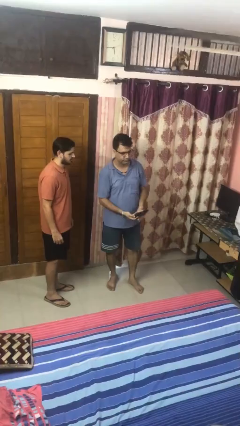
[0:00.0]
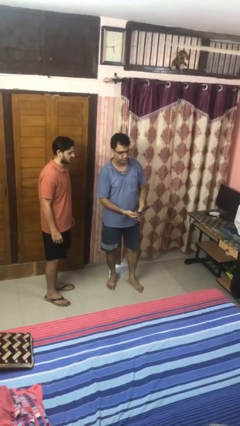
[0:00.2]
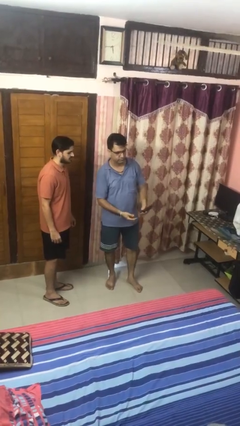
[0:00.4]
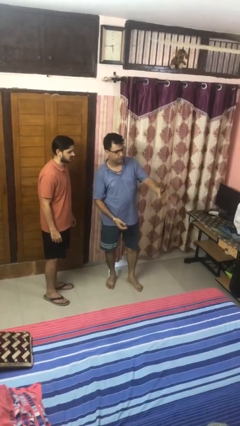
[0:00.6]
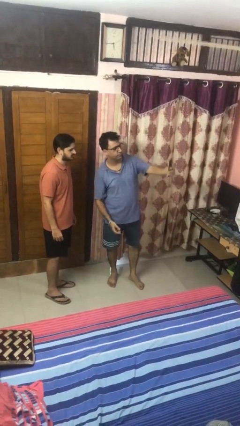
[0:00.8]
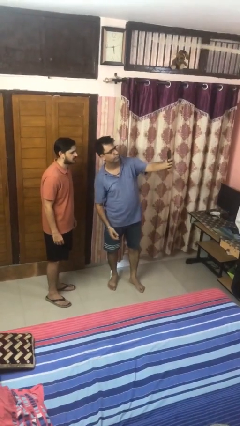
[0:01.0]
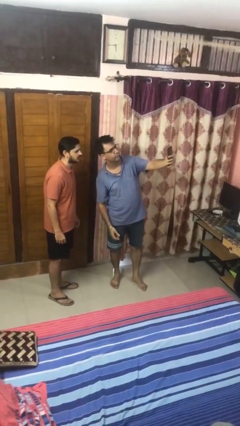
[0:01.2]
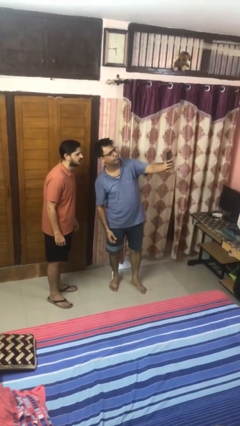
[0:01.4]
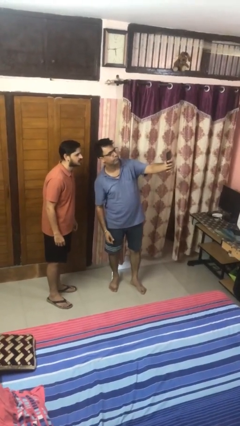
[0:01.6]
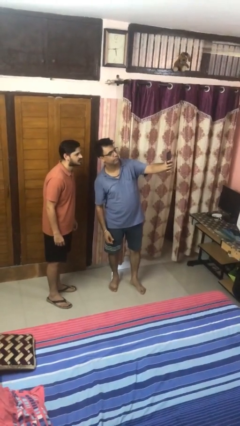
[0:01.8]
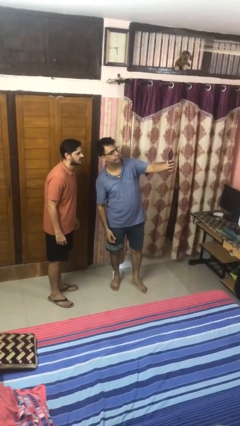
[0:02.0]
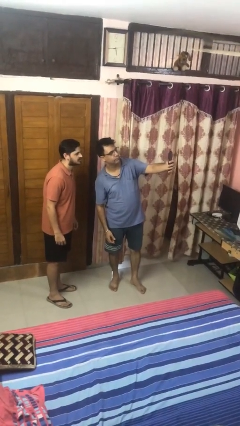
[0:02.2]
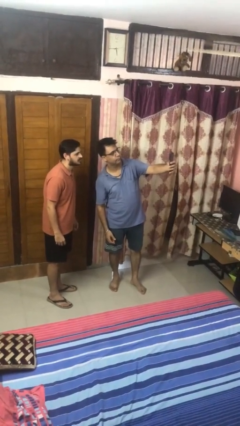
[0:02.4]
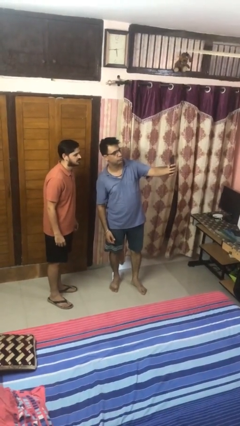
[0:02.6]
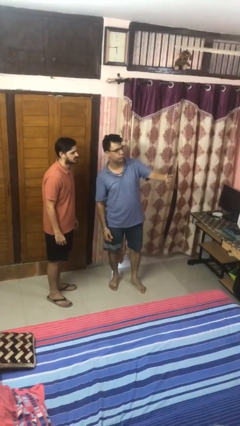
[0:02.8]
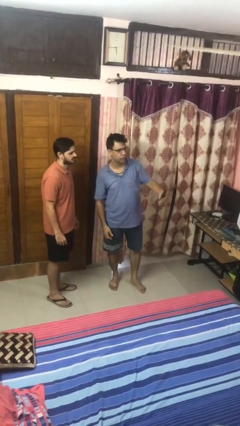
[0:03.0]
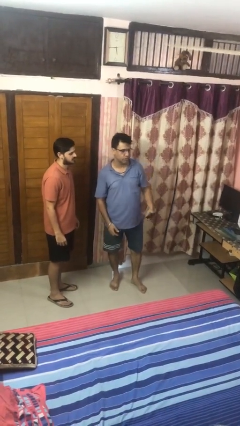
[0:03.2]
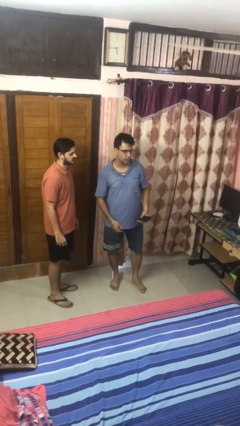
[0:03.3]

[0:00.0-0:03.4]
person takes selfie with person

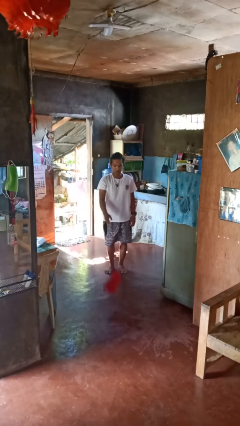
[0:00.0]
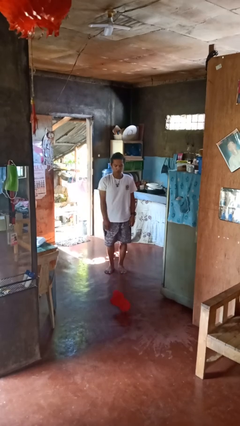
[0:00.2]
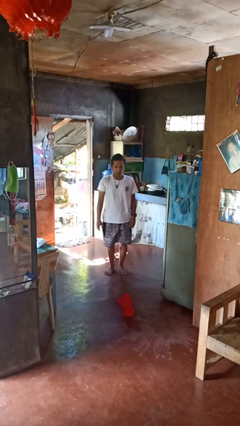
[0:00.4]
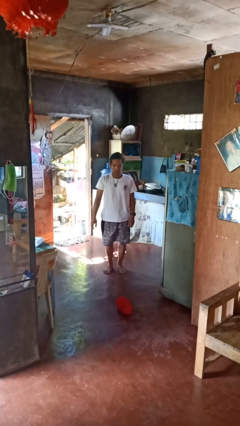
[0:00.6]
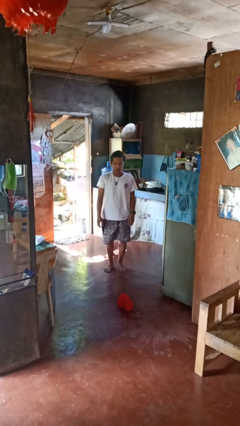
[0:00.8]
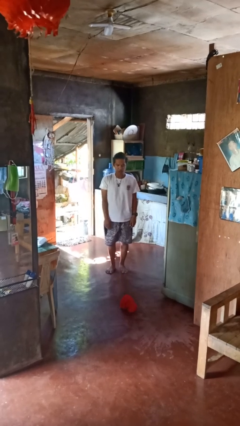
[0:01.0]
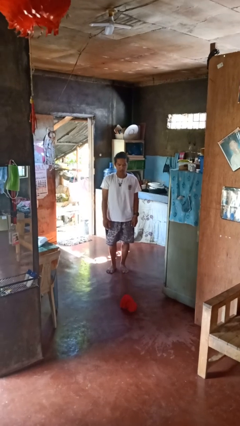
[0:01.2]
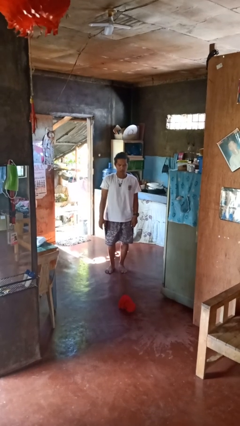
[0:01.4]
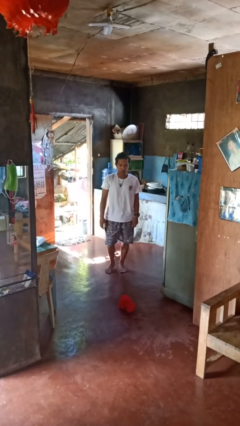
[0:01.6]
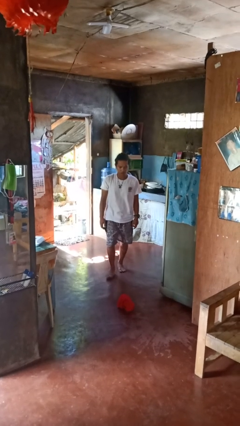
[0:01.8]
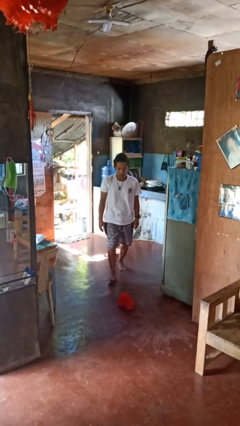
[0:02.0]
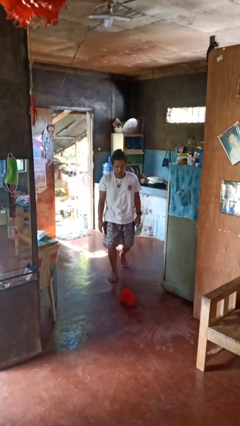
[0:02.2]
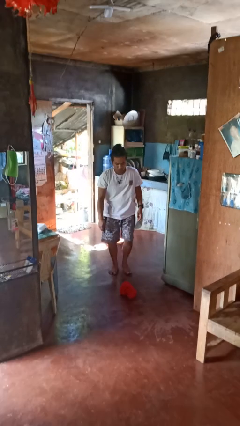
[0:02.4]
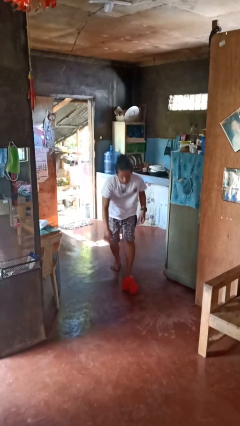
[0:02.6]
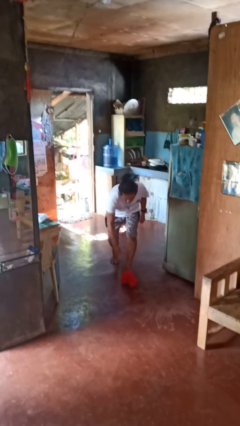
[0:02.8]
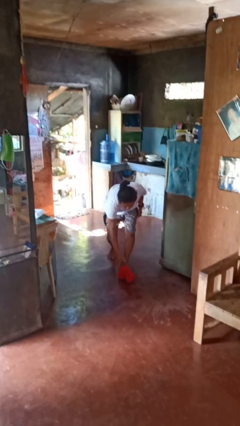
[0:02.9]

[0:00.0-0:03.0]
person throws object to ground

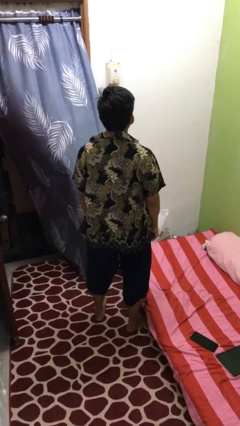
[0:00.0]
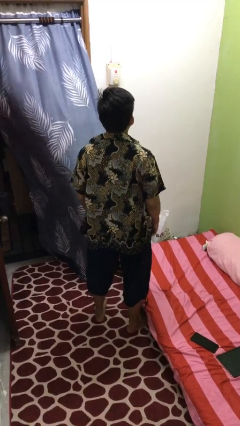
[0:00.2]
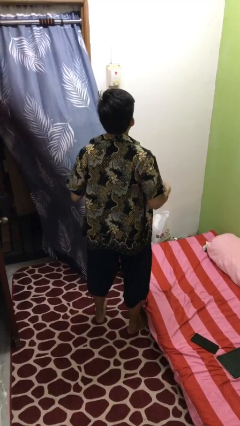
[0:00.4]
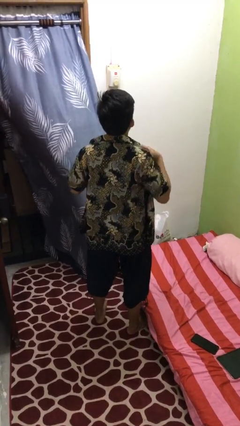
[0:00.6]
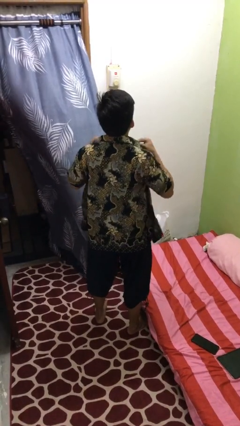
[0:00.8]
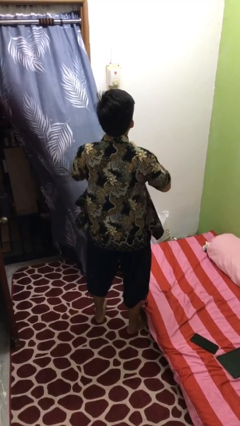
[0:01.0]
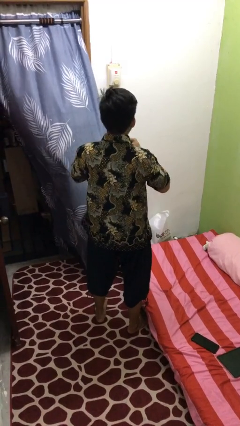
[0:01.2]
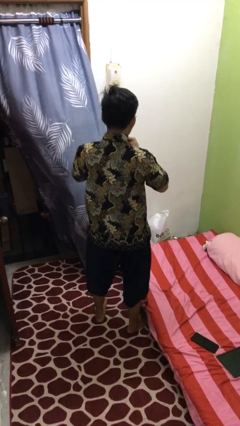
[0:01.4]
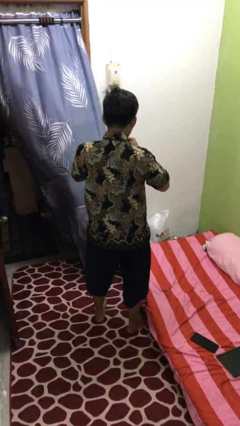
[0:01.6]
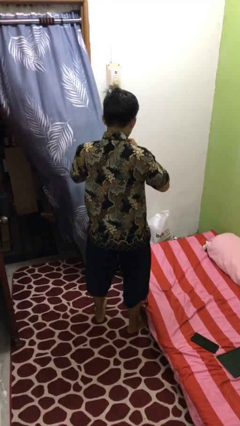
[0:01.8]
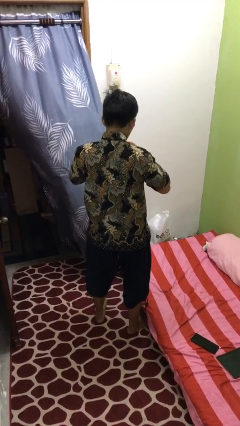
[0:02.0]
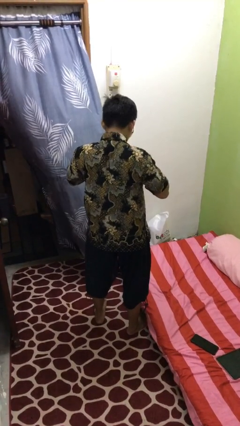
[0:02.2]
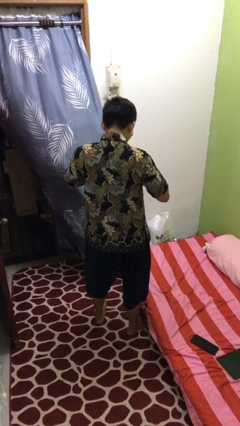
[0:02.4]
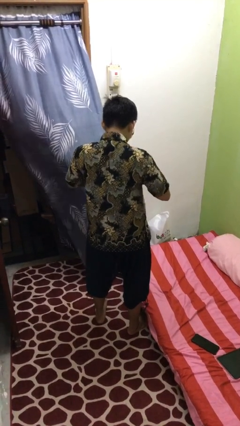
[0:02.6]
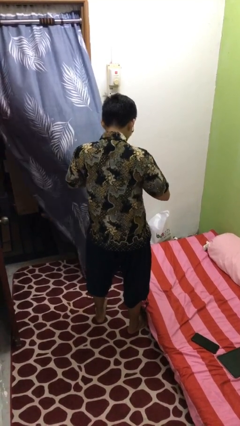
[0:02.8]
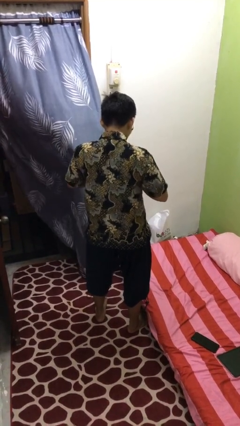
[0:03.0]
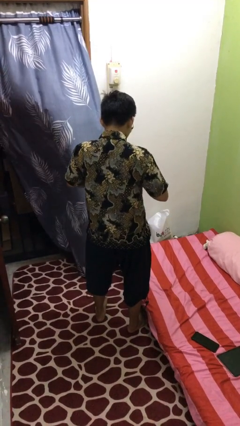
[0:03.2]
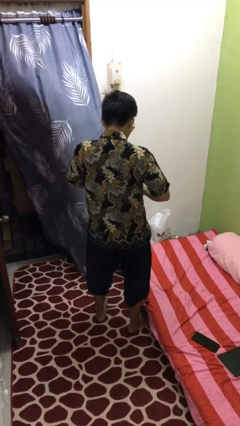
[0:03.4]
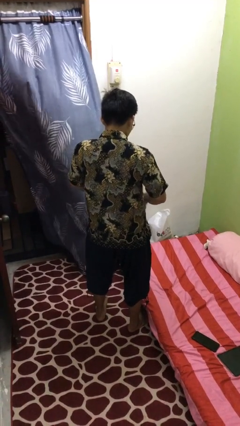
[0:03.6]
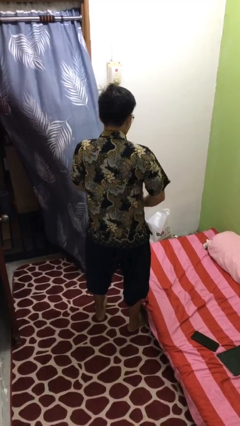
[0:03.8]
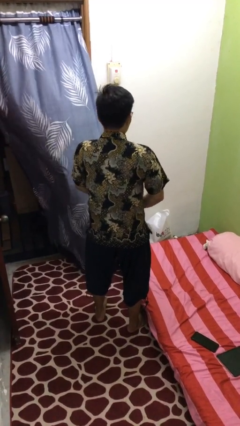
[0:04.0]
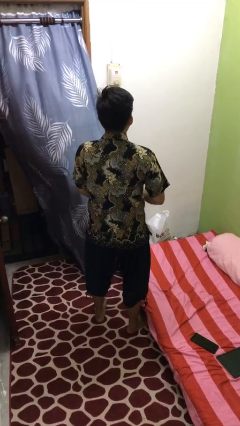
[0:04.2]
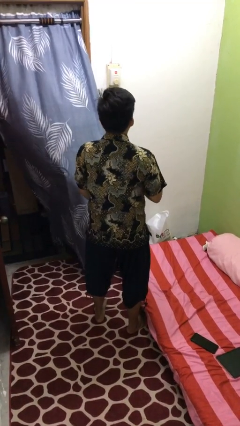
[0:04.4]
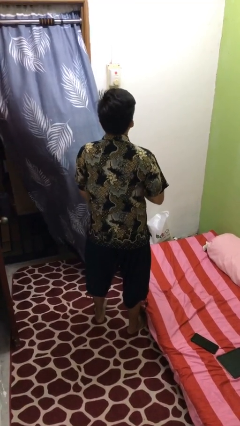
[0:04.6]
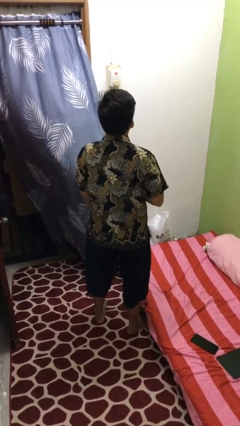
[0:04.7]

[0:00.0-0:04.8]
person buttons shirt

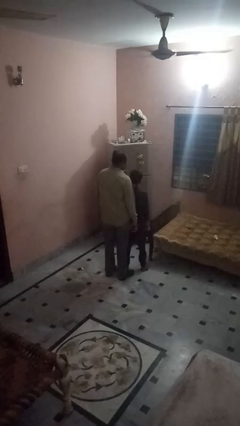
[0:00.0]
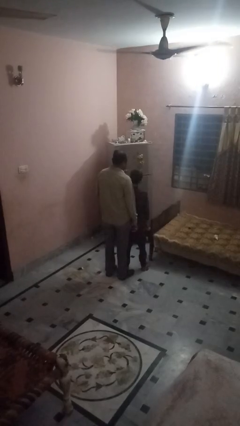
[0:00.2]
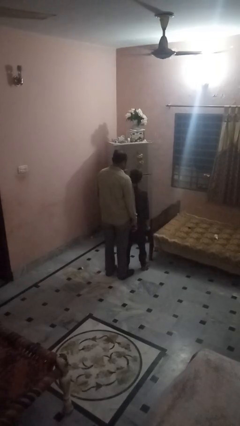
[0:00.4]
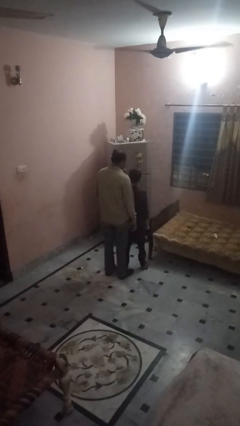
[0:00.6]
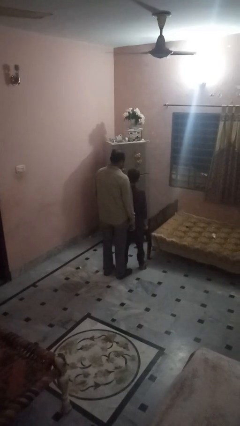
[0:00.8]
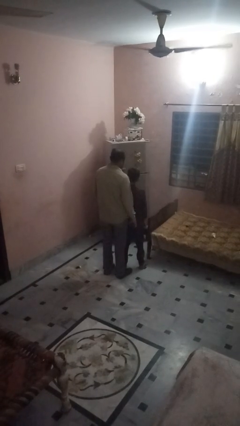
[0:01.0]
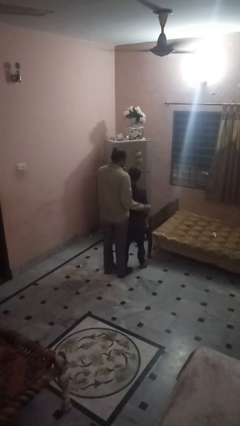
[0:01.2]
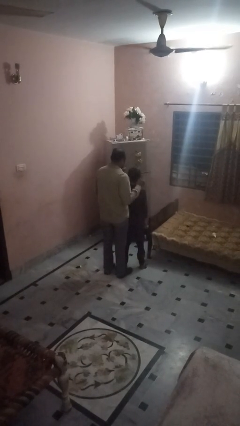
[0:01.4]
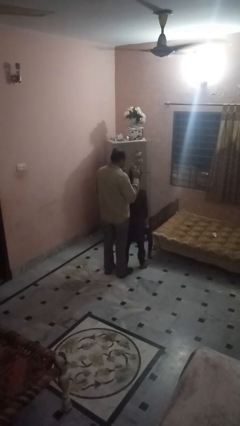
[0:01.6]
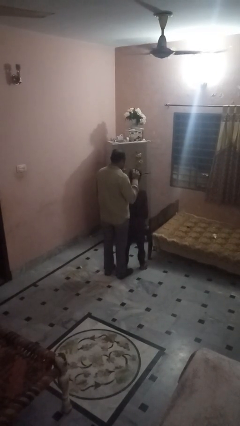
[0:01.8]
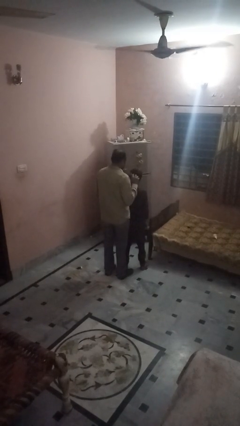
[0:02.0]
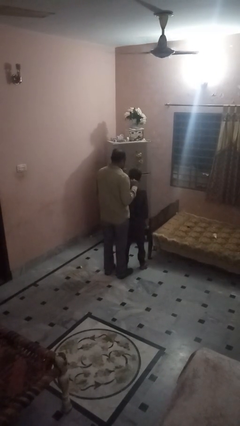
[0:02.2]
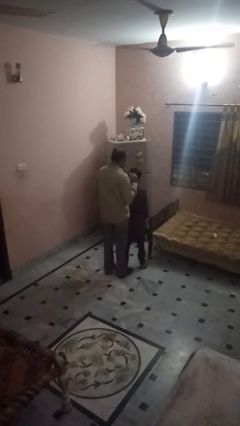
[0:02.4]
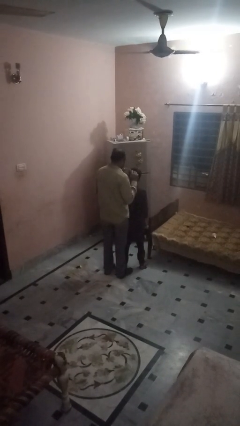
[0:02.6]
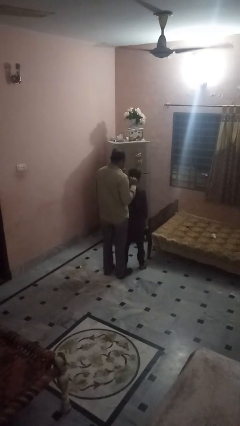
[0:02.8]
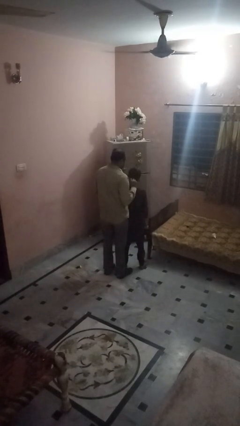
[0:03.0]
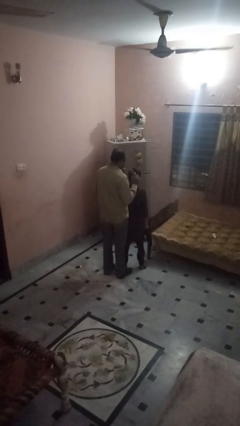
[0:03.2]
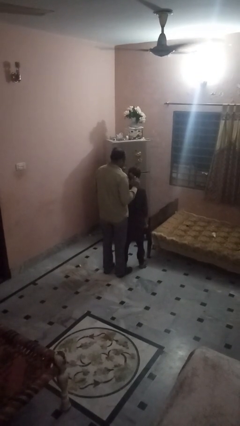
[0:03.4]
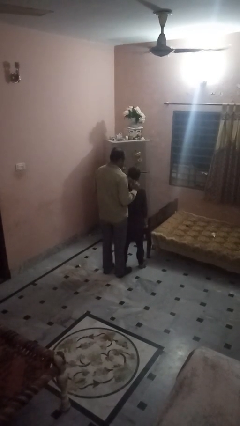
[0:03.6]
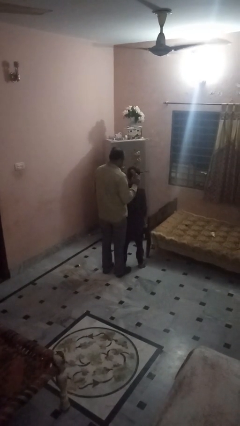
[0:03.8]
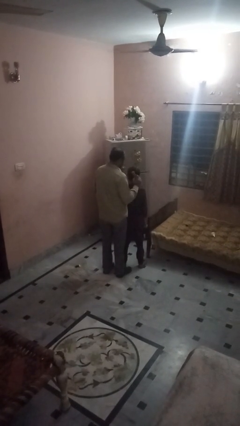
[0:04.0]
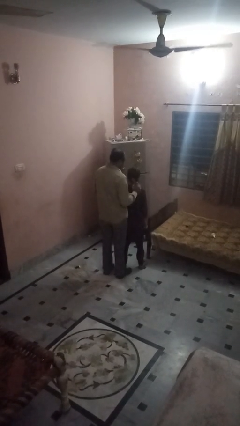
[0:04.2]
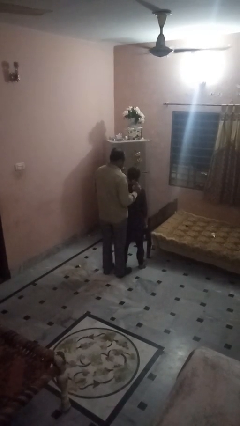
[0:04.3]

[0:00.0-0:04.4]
person brushes hair of person

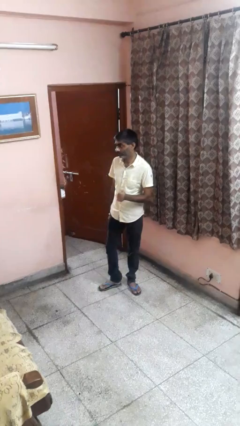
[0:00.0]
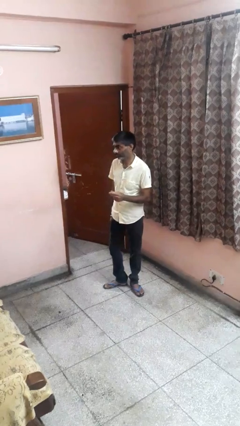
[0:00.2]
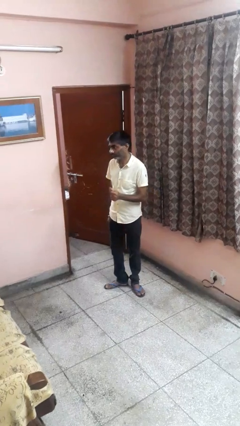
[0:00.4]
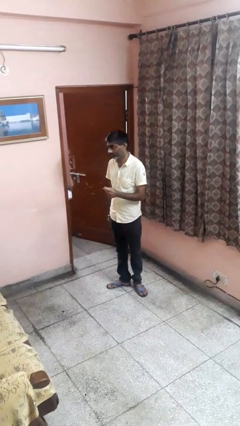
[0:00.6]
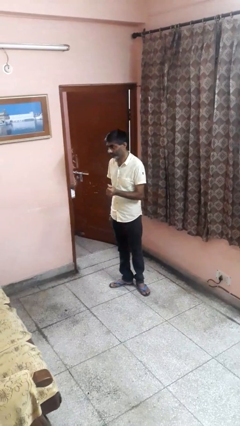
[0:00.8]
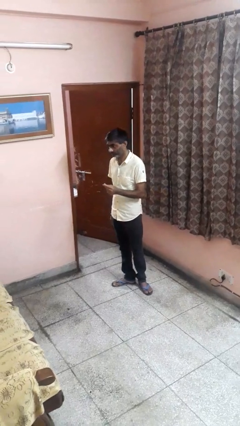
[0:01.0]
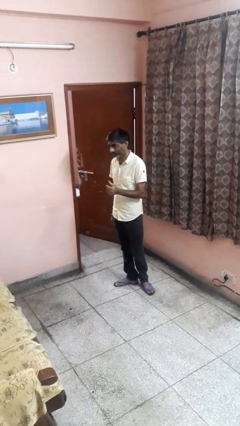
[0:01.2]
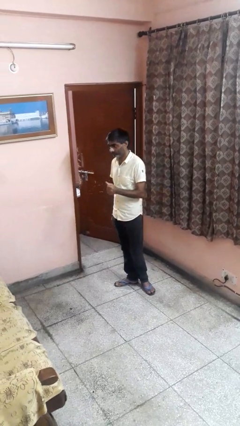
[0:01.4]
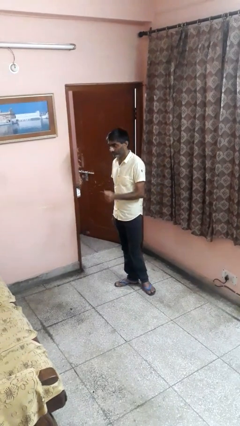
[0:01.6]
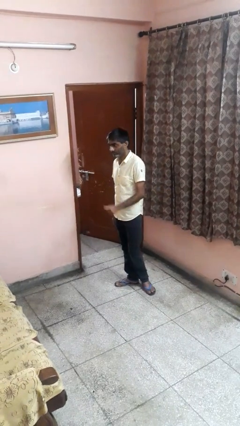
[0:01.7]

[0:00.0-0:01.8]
person snaps fingers
